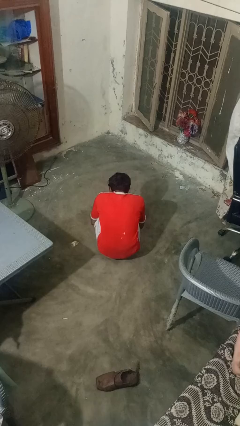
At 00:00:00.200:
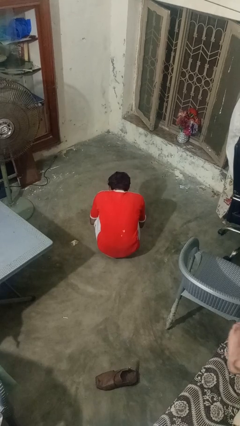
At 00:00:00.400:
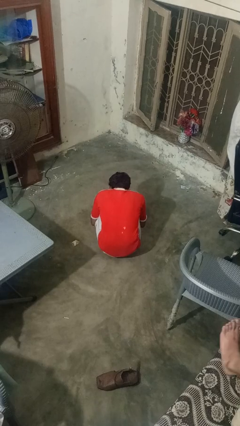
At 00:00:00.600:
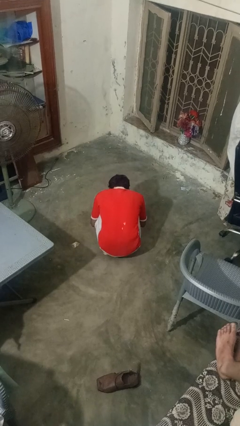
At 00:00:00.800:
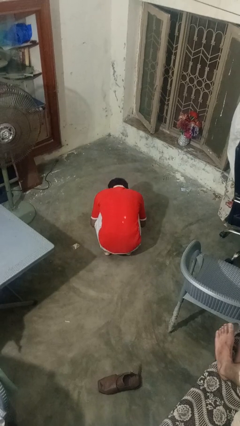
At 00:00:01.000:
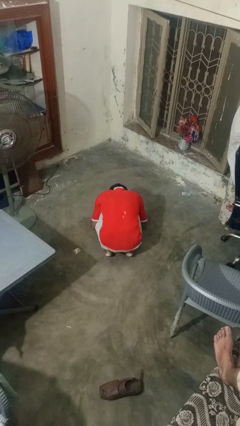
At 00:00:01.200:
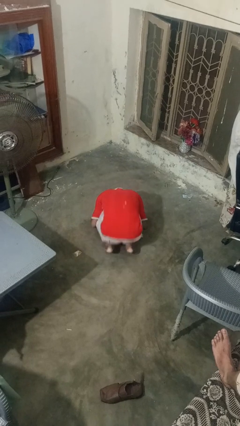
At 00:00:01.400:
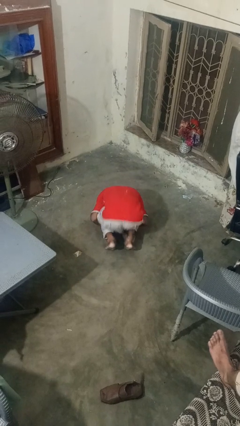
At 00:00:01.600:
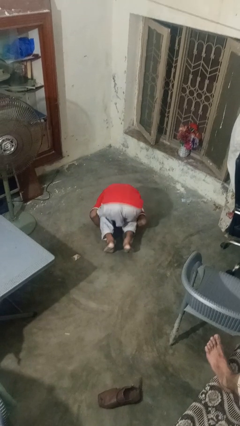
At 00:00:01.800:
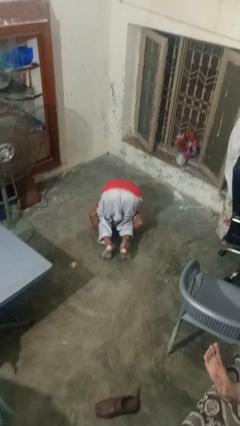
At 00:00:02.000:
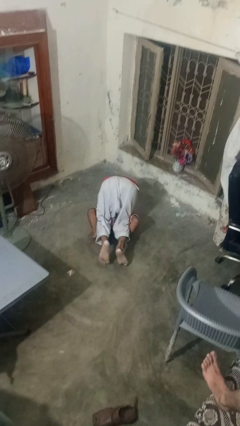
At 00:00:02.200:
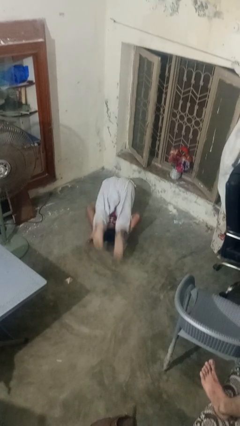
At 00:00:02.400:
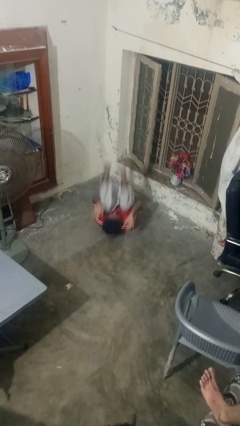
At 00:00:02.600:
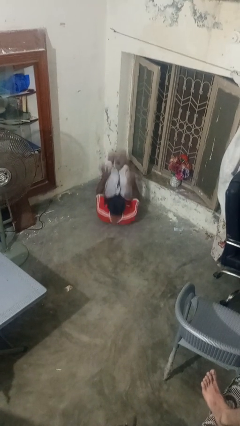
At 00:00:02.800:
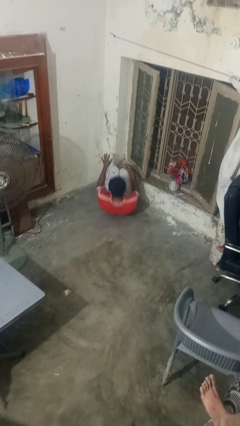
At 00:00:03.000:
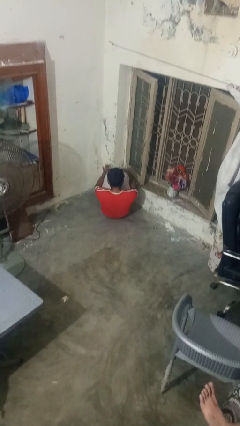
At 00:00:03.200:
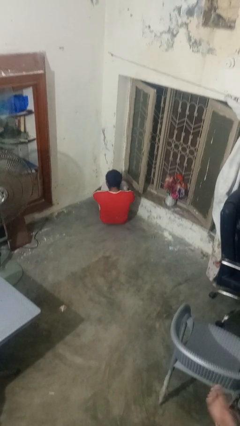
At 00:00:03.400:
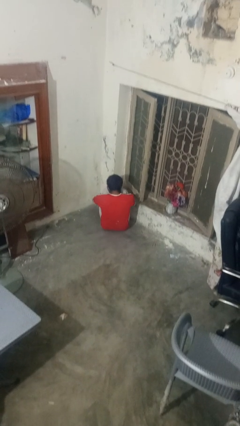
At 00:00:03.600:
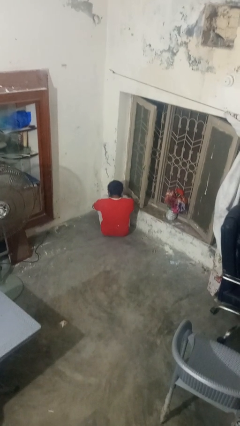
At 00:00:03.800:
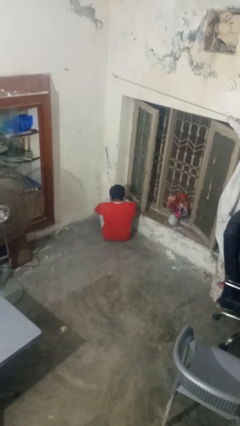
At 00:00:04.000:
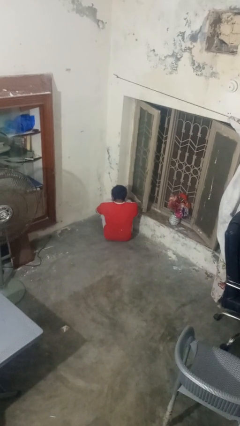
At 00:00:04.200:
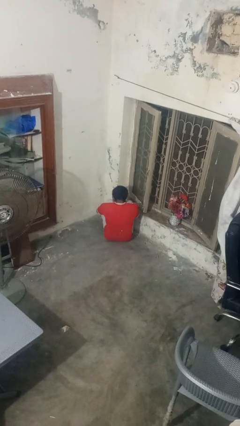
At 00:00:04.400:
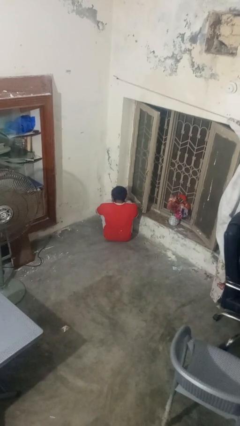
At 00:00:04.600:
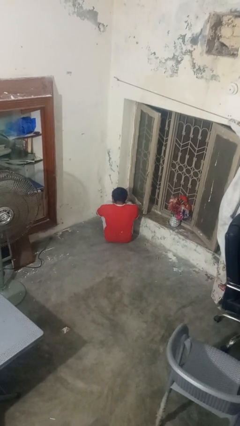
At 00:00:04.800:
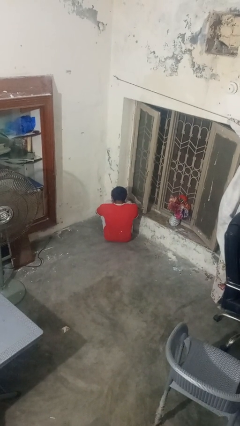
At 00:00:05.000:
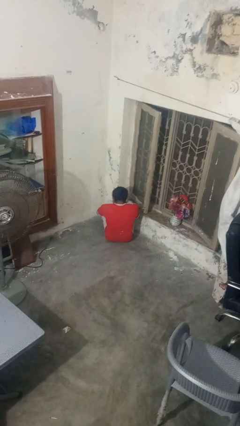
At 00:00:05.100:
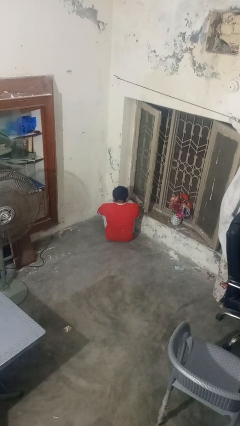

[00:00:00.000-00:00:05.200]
person somersaults

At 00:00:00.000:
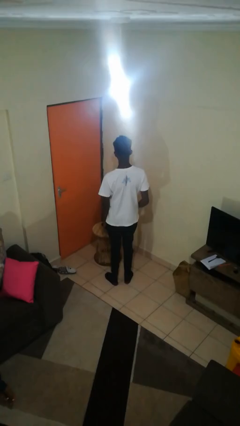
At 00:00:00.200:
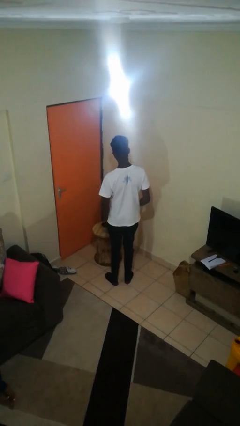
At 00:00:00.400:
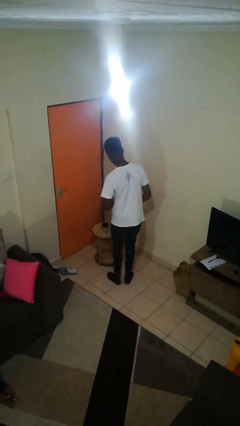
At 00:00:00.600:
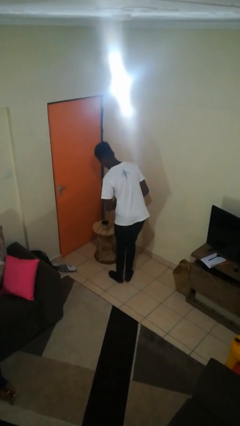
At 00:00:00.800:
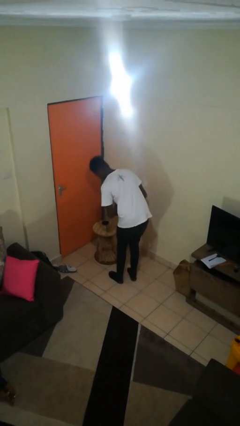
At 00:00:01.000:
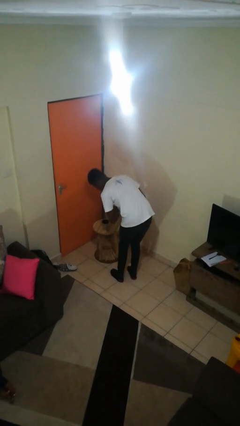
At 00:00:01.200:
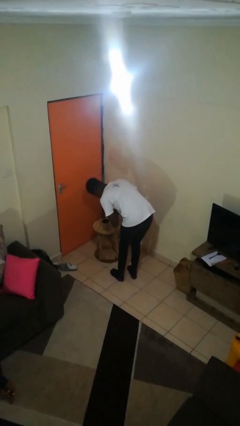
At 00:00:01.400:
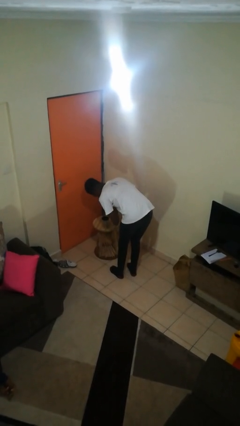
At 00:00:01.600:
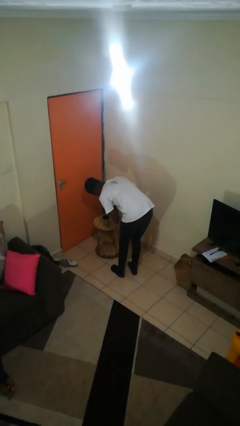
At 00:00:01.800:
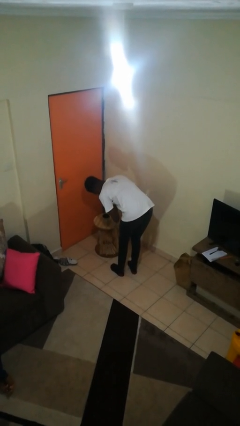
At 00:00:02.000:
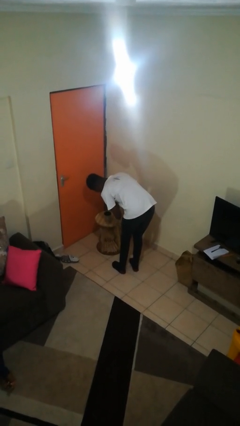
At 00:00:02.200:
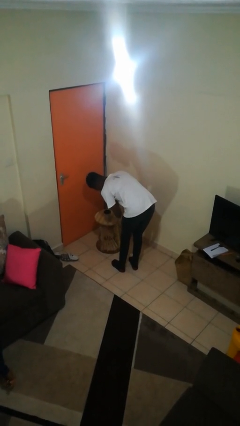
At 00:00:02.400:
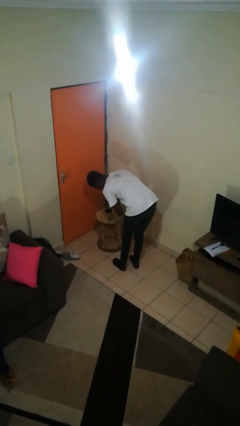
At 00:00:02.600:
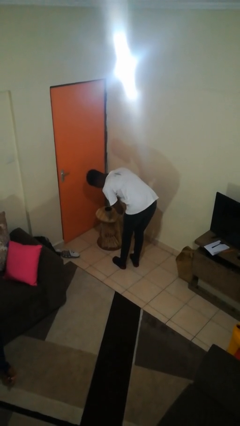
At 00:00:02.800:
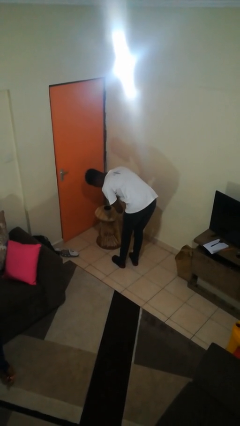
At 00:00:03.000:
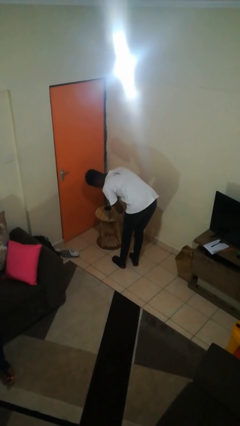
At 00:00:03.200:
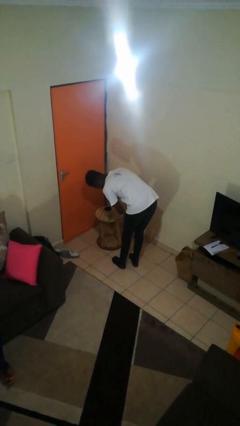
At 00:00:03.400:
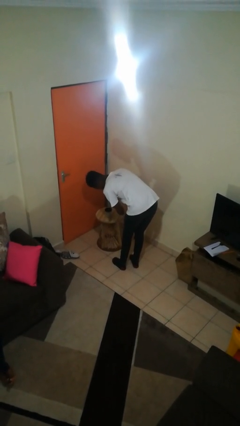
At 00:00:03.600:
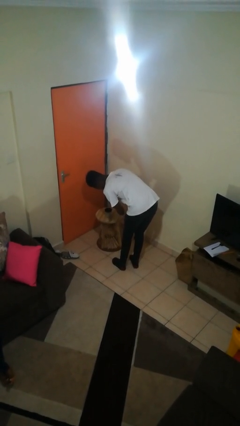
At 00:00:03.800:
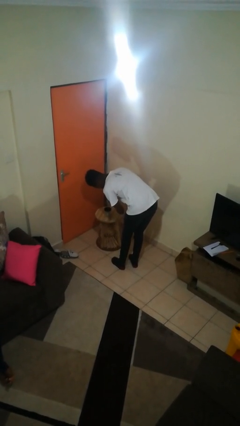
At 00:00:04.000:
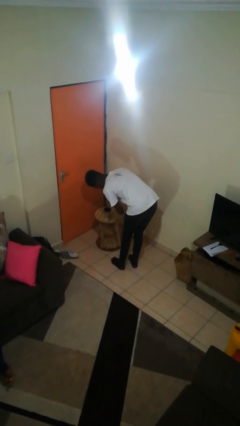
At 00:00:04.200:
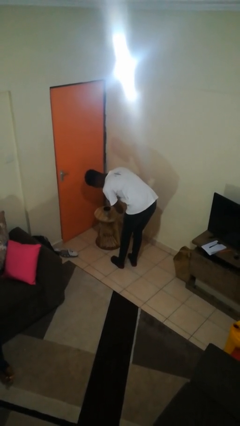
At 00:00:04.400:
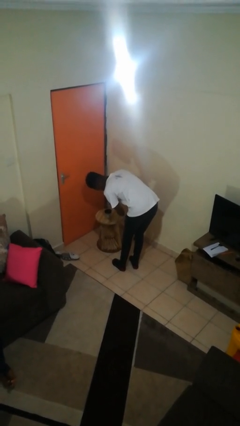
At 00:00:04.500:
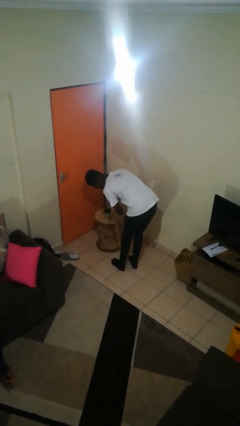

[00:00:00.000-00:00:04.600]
person pours coffee into mug

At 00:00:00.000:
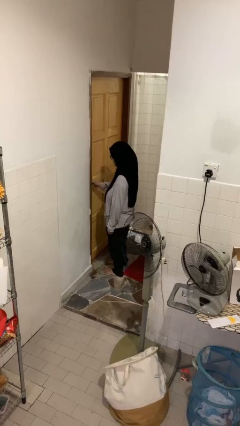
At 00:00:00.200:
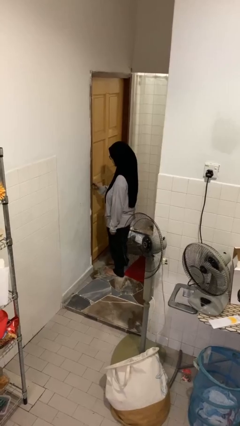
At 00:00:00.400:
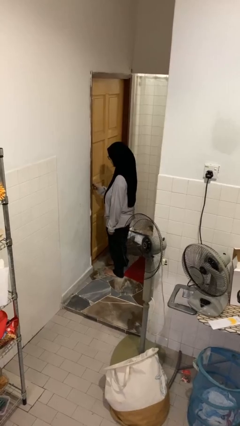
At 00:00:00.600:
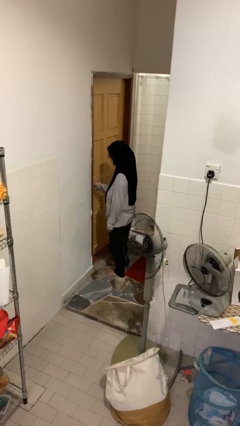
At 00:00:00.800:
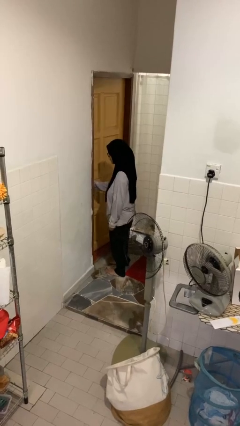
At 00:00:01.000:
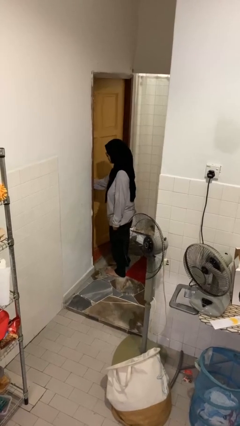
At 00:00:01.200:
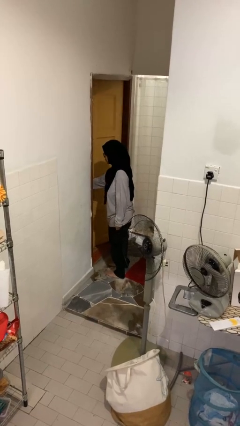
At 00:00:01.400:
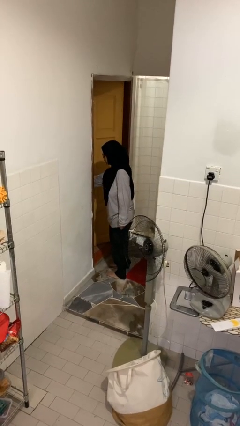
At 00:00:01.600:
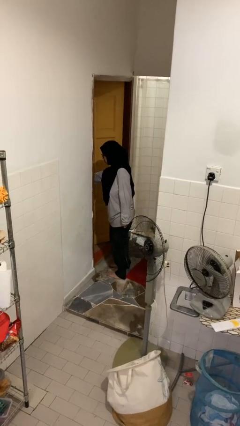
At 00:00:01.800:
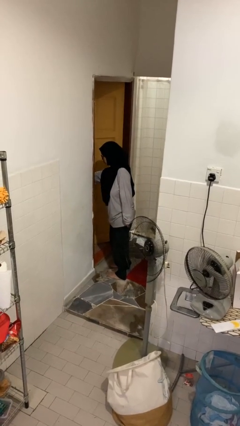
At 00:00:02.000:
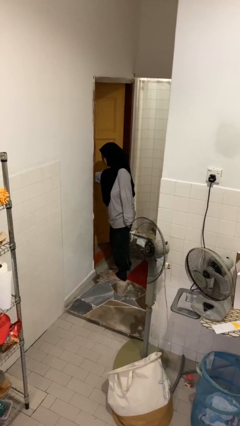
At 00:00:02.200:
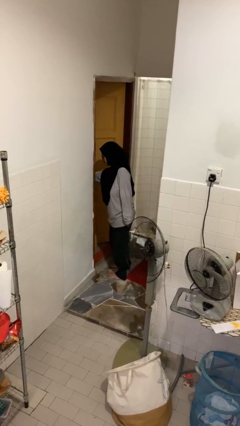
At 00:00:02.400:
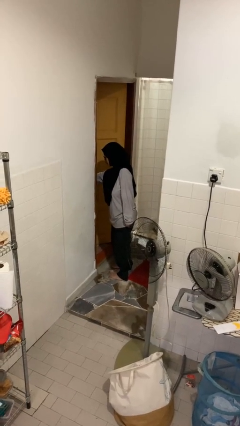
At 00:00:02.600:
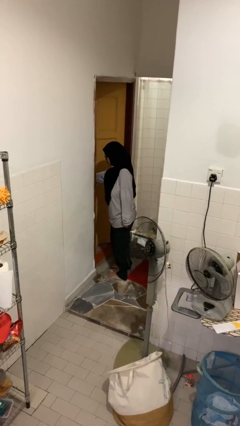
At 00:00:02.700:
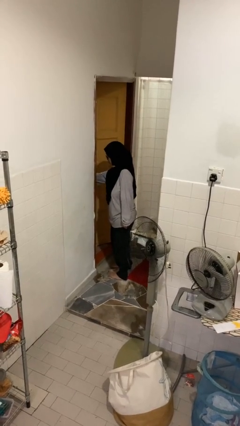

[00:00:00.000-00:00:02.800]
person opens facility door

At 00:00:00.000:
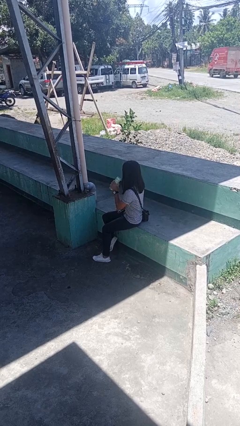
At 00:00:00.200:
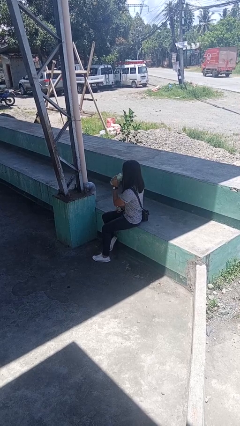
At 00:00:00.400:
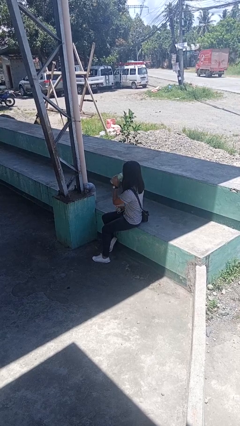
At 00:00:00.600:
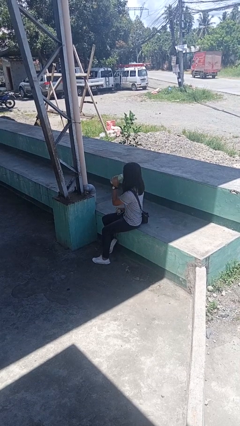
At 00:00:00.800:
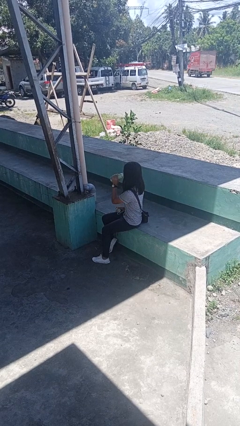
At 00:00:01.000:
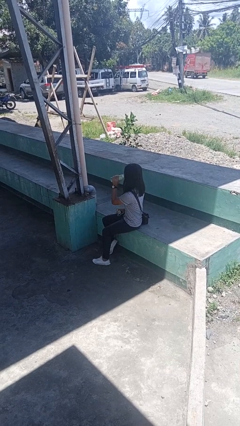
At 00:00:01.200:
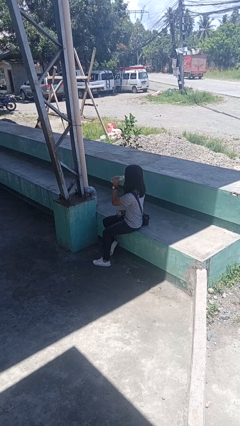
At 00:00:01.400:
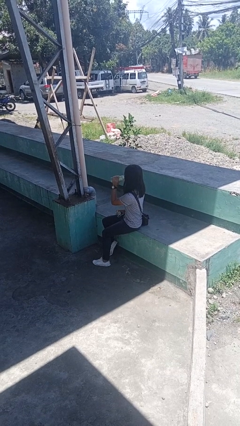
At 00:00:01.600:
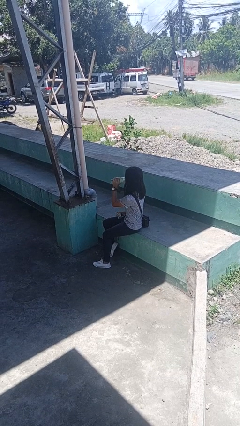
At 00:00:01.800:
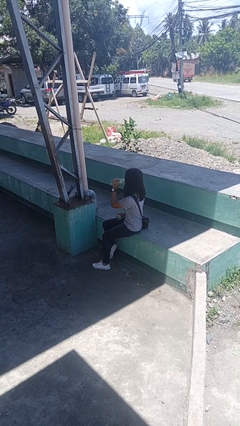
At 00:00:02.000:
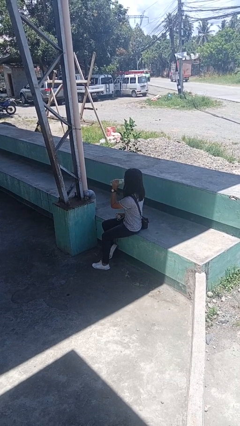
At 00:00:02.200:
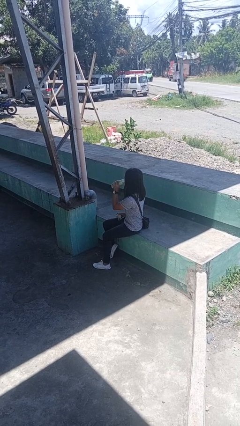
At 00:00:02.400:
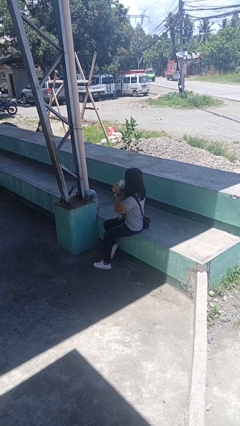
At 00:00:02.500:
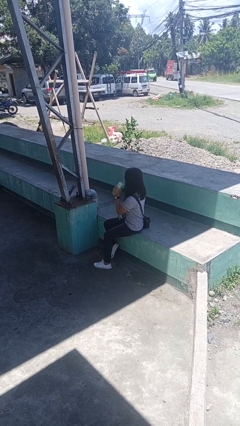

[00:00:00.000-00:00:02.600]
person drinks from bottle

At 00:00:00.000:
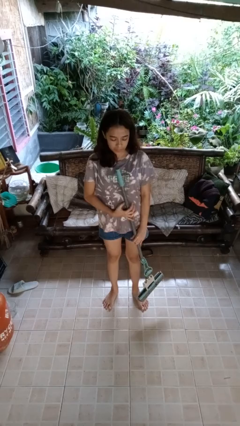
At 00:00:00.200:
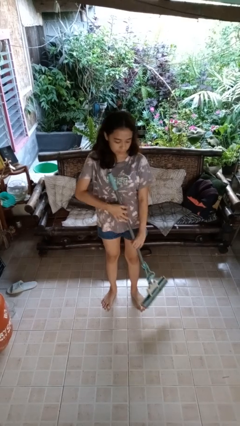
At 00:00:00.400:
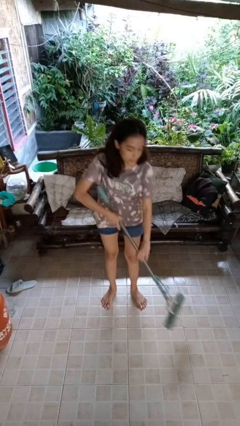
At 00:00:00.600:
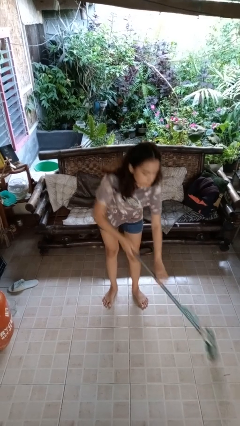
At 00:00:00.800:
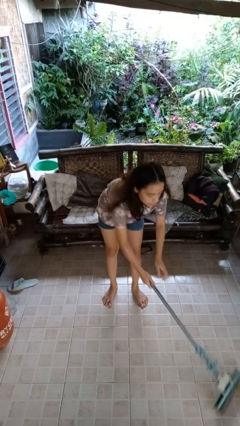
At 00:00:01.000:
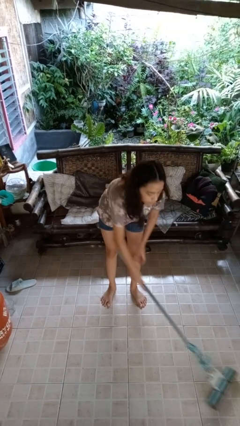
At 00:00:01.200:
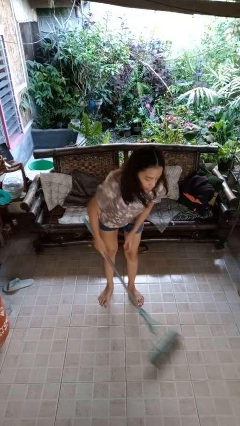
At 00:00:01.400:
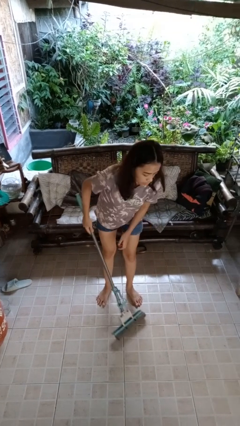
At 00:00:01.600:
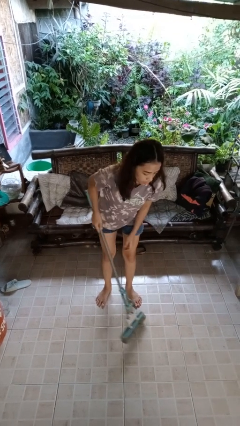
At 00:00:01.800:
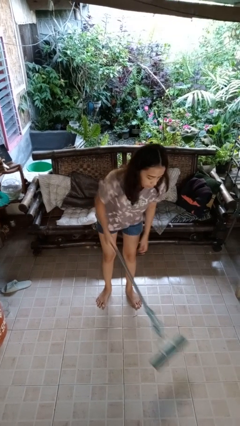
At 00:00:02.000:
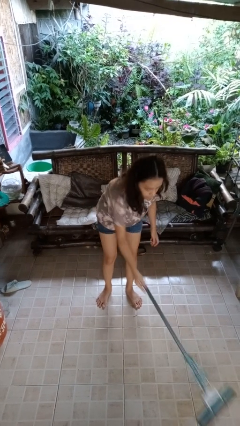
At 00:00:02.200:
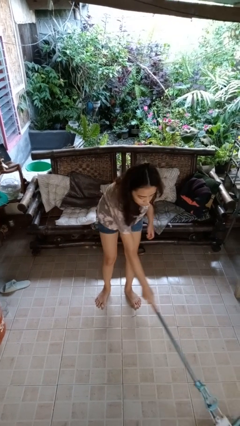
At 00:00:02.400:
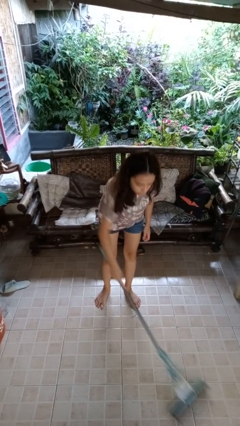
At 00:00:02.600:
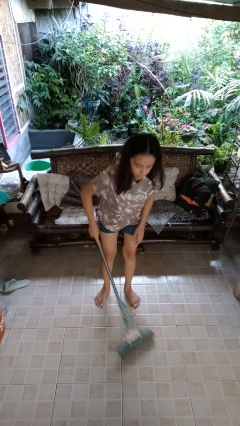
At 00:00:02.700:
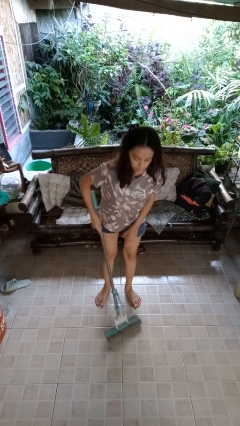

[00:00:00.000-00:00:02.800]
person mops
